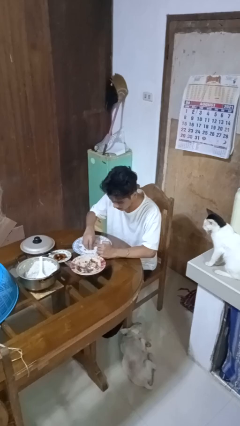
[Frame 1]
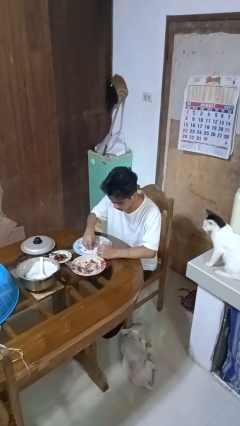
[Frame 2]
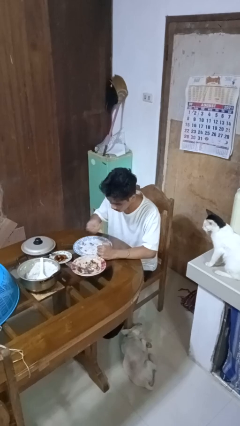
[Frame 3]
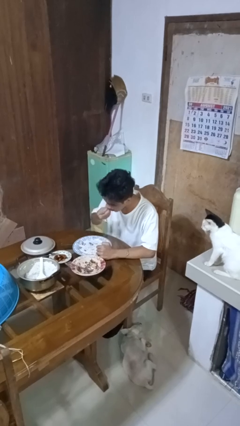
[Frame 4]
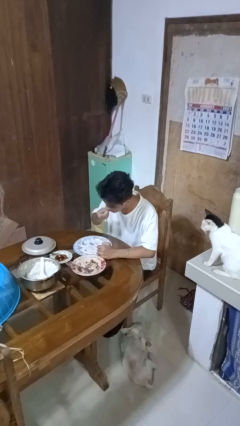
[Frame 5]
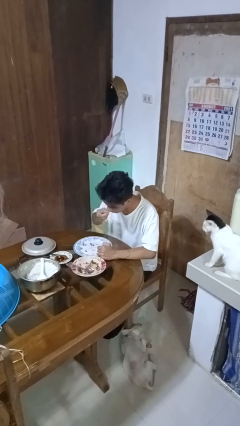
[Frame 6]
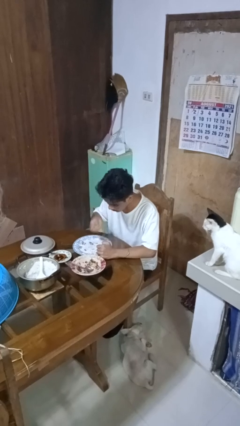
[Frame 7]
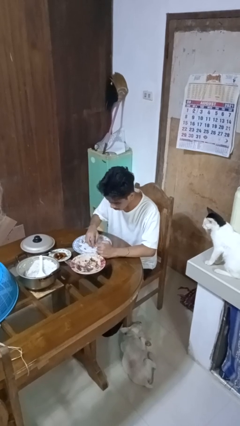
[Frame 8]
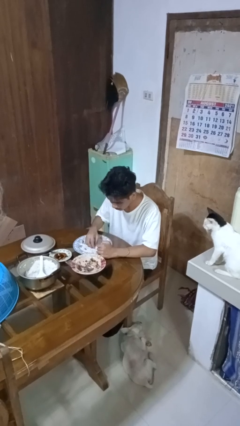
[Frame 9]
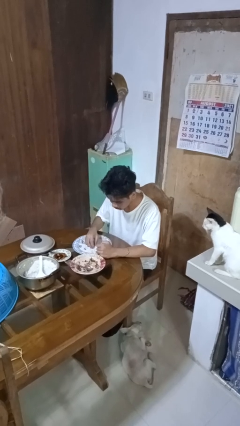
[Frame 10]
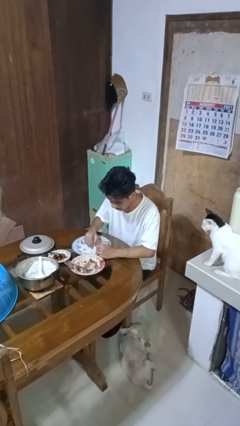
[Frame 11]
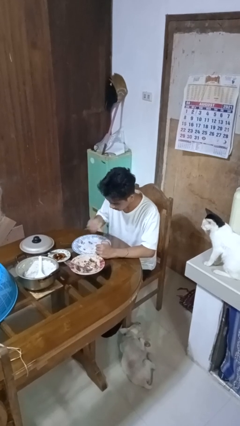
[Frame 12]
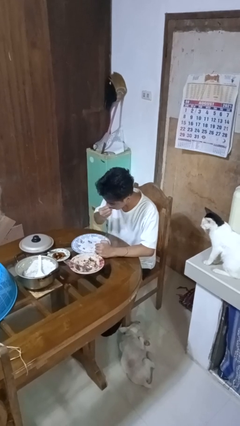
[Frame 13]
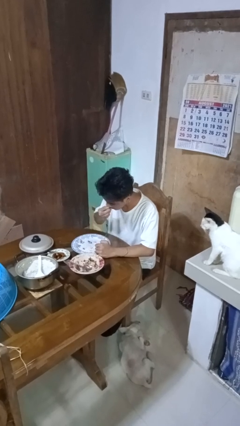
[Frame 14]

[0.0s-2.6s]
person eats with hands

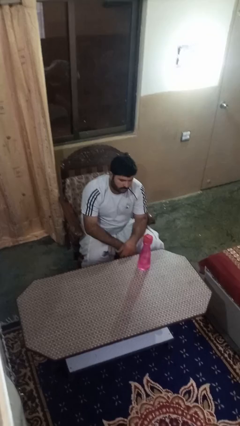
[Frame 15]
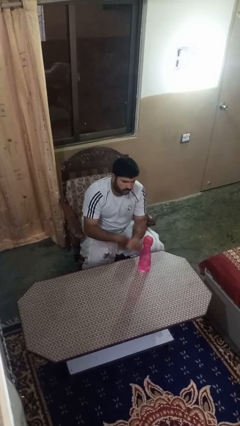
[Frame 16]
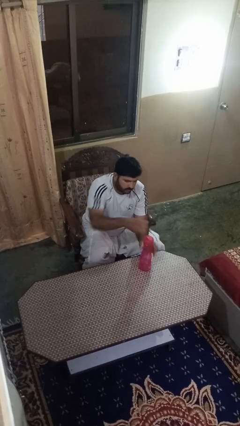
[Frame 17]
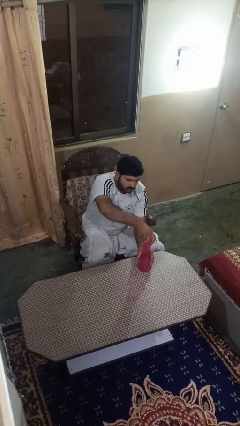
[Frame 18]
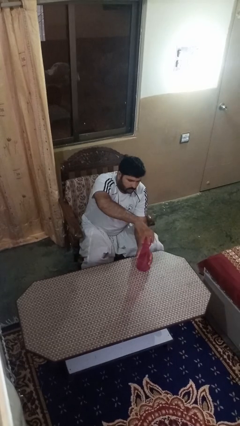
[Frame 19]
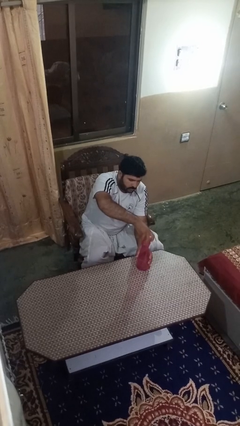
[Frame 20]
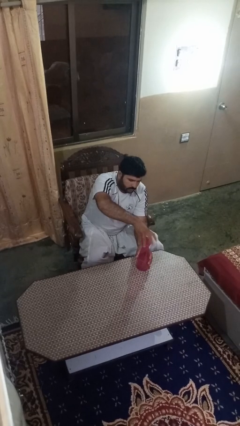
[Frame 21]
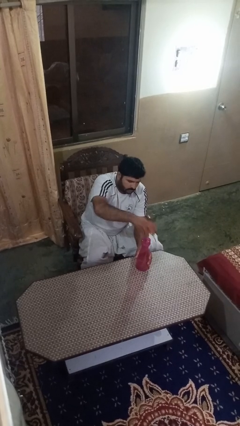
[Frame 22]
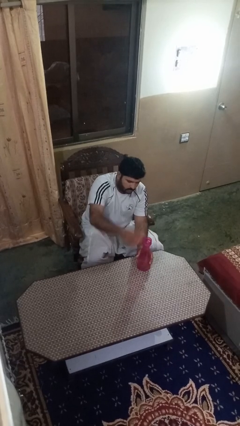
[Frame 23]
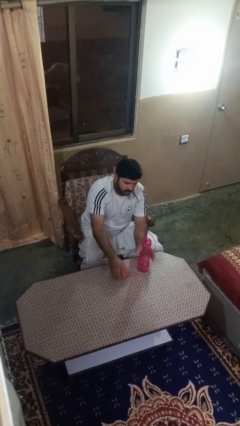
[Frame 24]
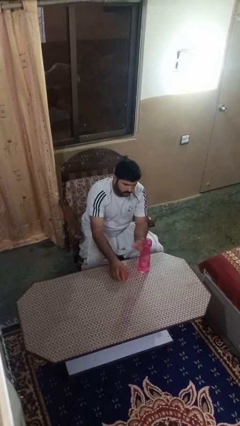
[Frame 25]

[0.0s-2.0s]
person unscrews lid from bottle

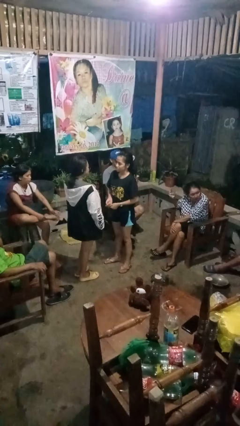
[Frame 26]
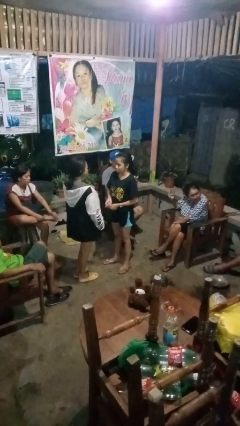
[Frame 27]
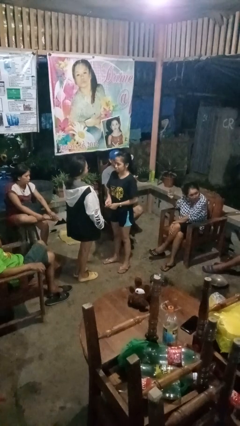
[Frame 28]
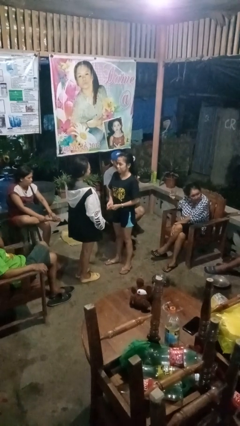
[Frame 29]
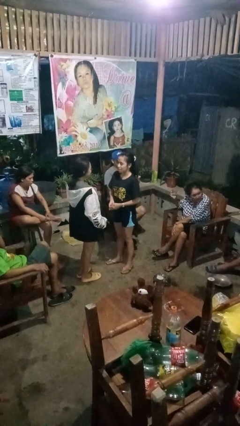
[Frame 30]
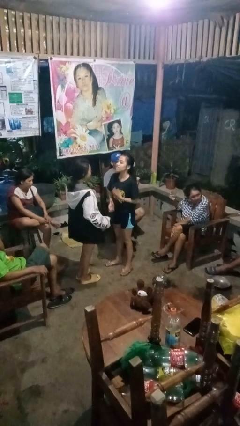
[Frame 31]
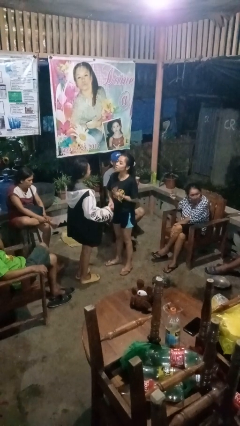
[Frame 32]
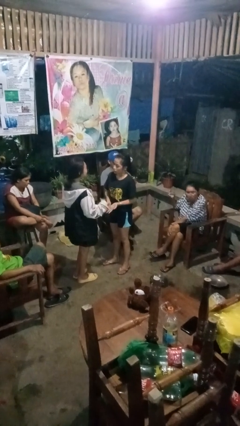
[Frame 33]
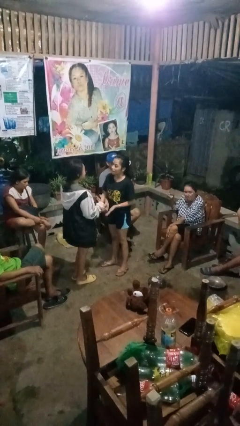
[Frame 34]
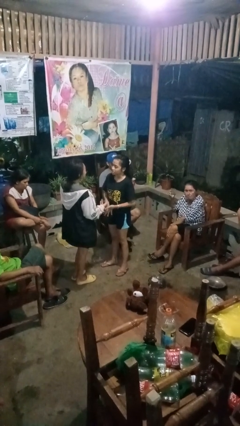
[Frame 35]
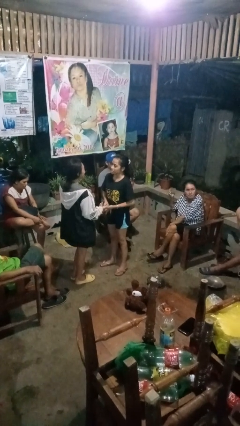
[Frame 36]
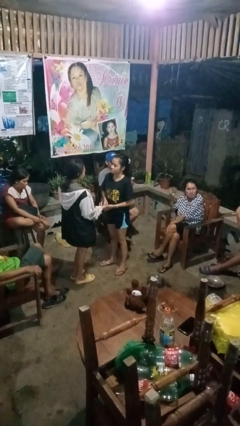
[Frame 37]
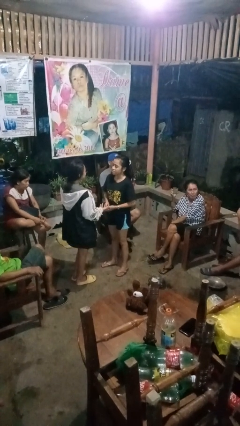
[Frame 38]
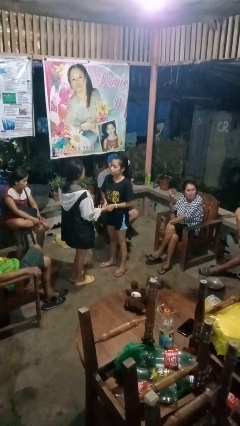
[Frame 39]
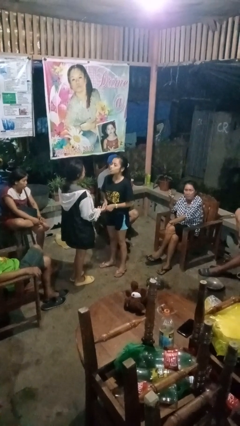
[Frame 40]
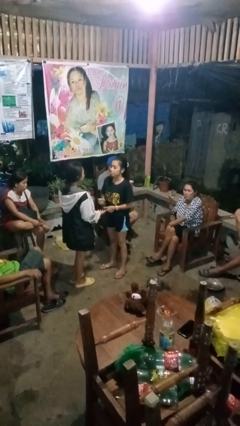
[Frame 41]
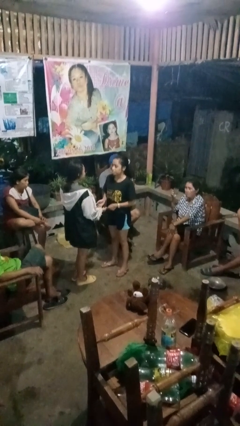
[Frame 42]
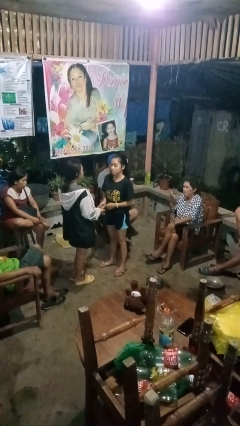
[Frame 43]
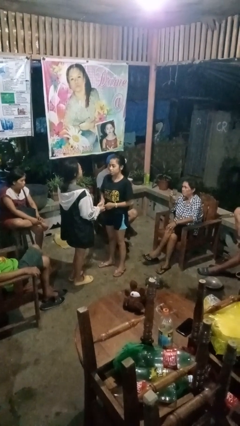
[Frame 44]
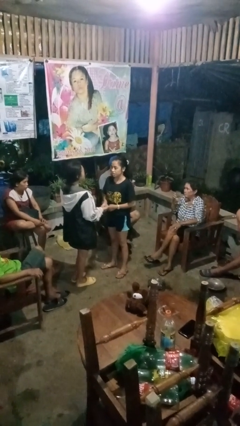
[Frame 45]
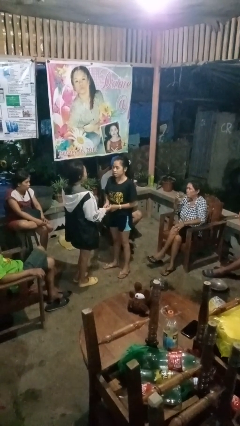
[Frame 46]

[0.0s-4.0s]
person talks to person

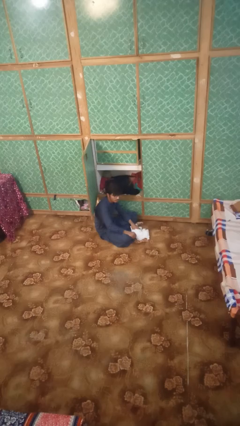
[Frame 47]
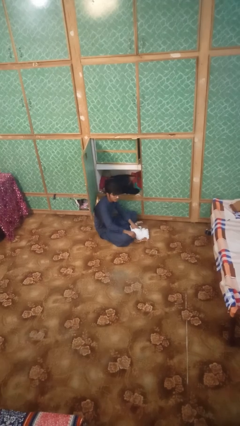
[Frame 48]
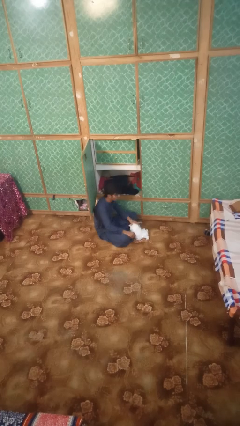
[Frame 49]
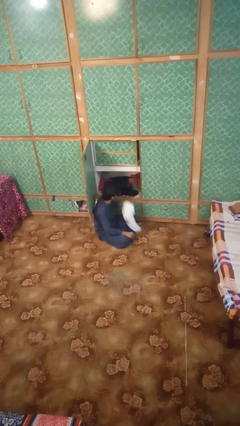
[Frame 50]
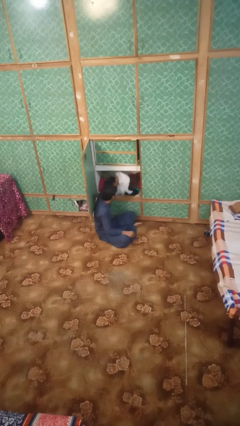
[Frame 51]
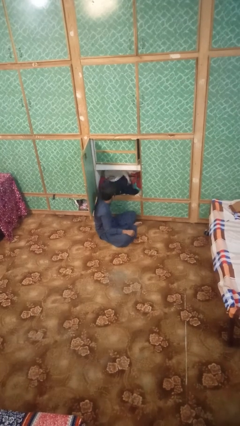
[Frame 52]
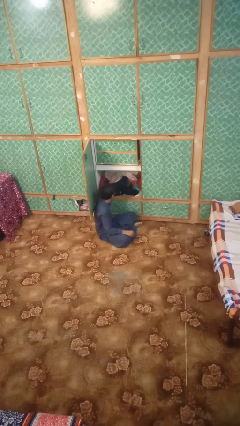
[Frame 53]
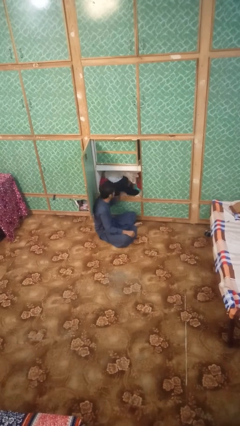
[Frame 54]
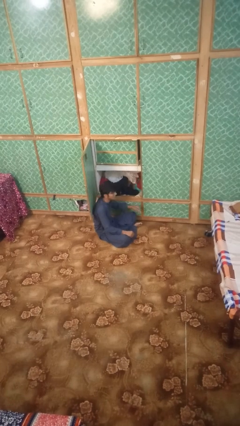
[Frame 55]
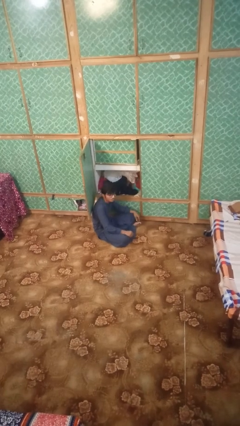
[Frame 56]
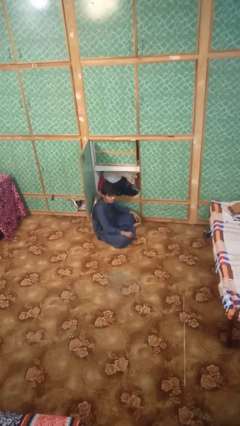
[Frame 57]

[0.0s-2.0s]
person puts clothes into dresser

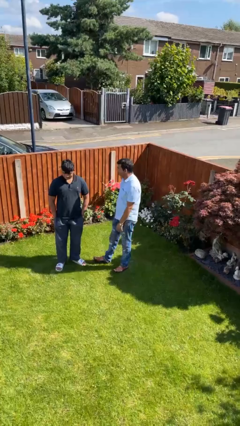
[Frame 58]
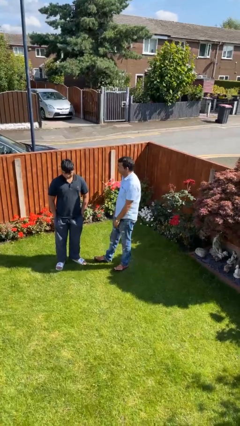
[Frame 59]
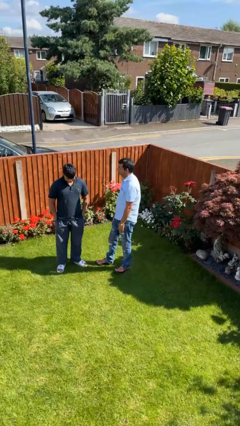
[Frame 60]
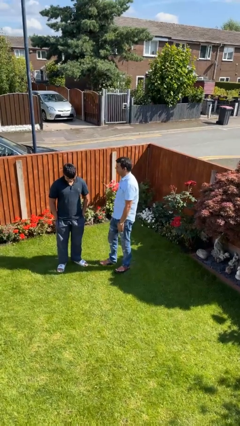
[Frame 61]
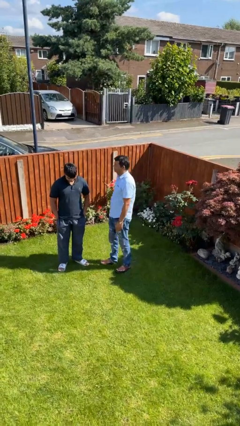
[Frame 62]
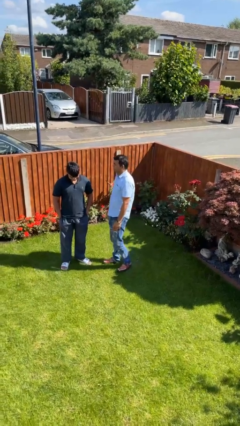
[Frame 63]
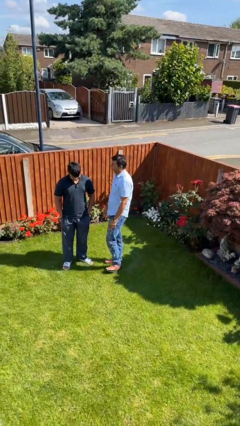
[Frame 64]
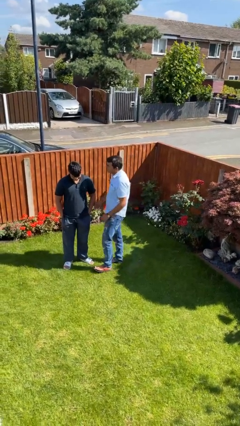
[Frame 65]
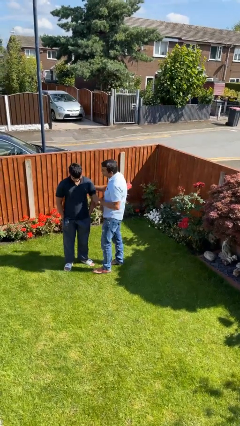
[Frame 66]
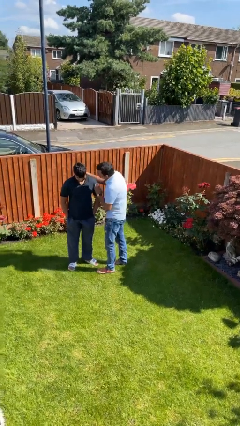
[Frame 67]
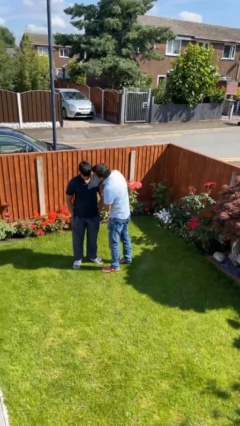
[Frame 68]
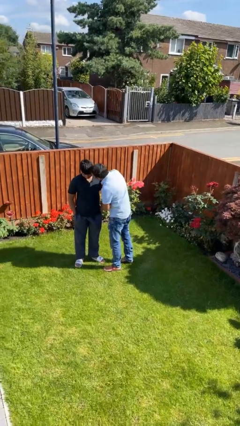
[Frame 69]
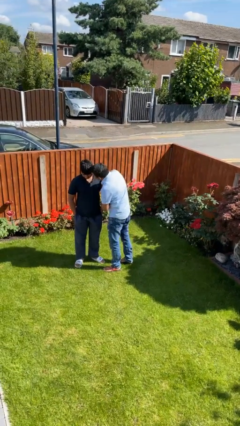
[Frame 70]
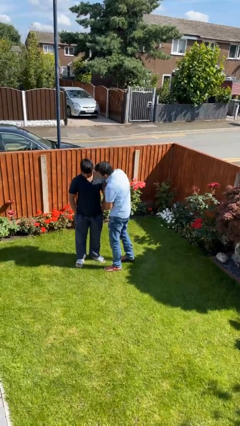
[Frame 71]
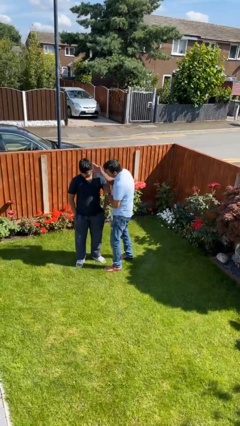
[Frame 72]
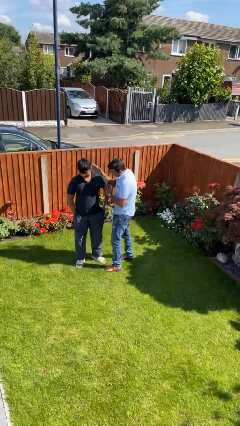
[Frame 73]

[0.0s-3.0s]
person kisses cheek of person
